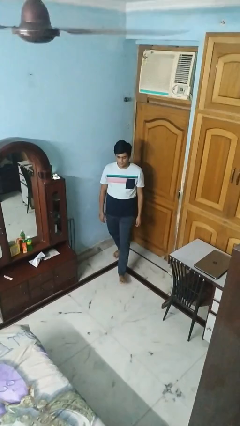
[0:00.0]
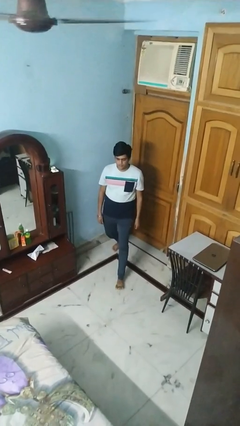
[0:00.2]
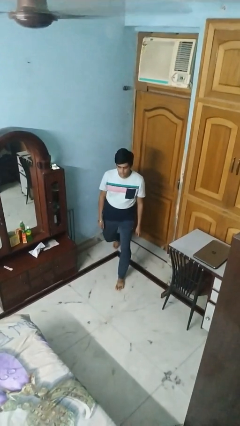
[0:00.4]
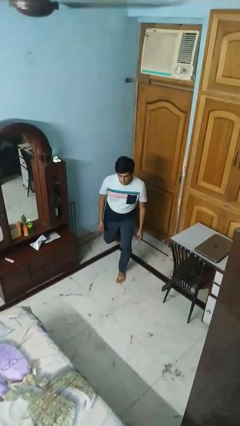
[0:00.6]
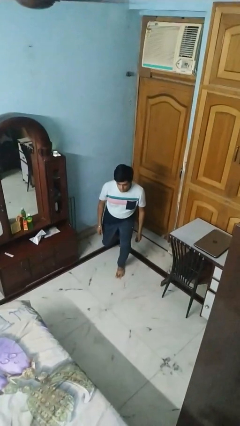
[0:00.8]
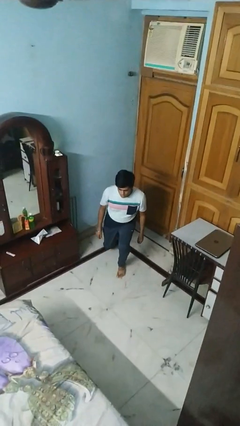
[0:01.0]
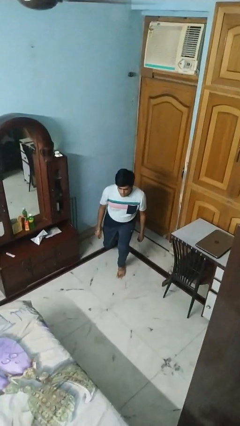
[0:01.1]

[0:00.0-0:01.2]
person exercises with lunges

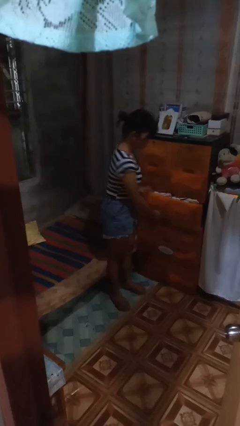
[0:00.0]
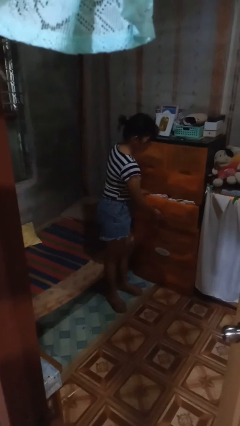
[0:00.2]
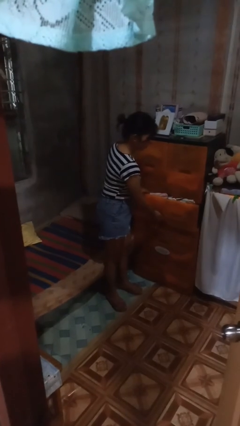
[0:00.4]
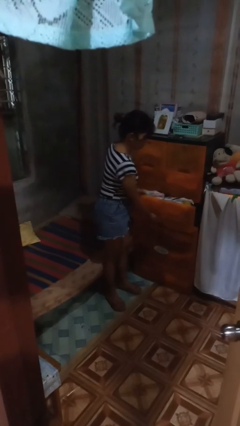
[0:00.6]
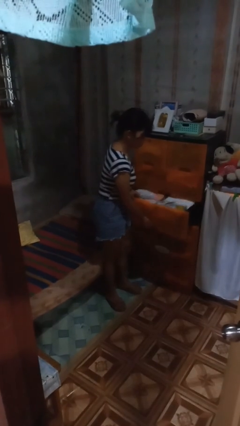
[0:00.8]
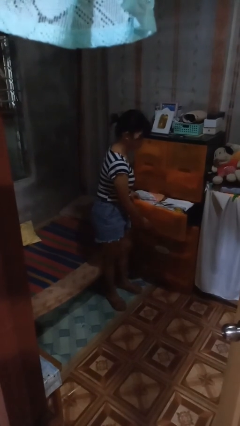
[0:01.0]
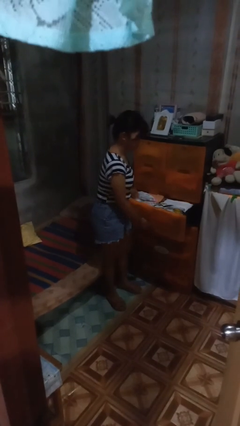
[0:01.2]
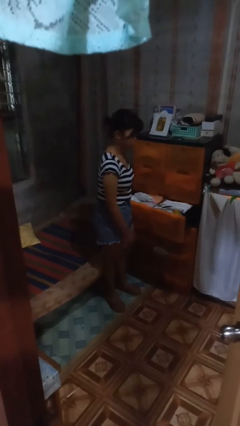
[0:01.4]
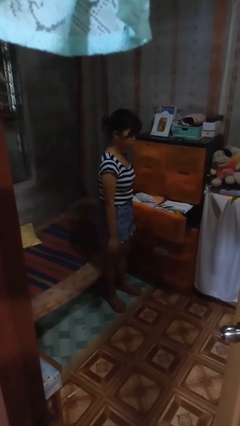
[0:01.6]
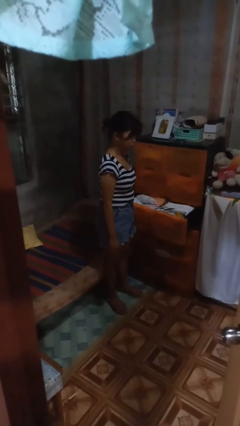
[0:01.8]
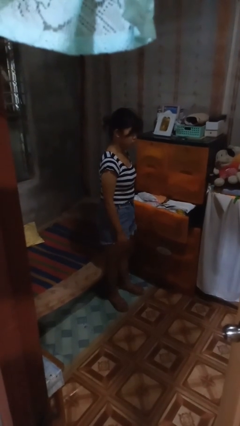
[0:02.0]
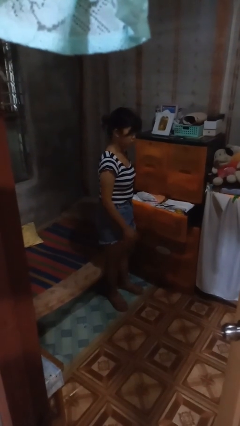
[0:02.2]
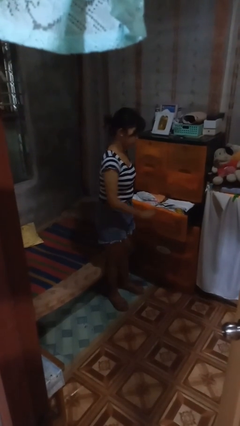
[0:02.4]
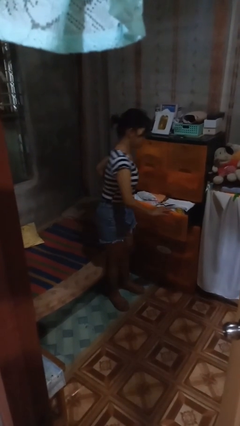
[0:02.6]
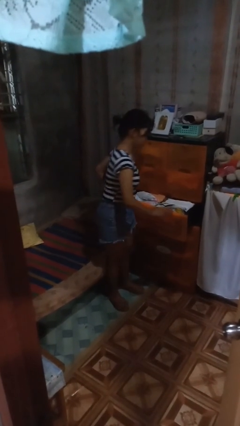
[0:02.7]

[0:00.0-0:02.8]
person opens dresser drawer

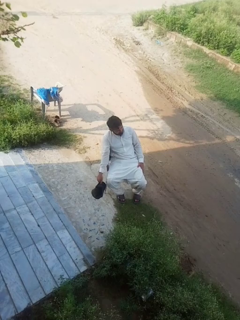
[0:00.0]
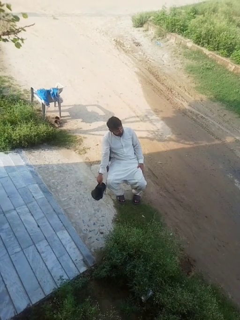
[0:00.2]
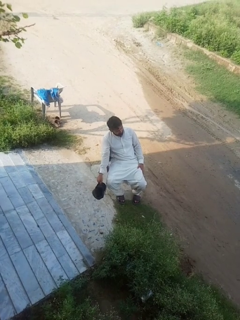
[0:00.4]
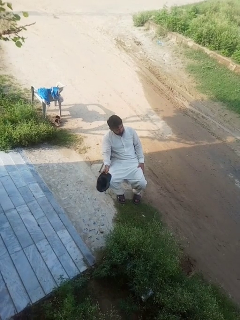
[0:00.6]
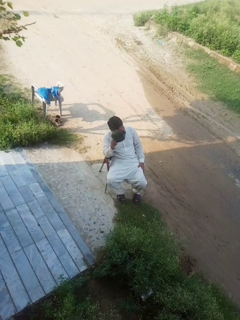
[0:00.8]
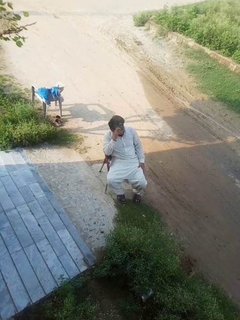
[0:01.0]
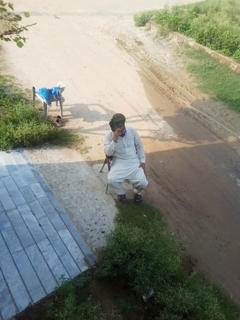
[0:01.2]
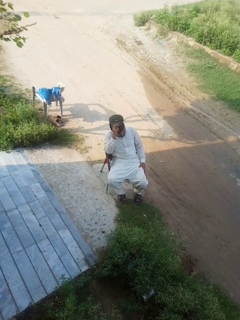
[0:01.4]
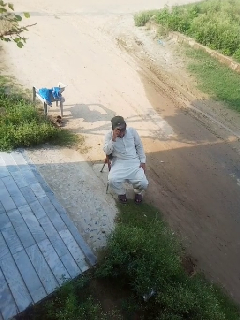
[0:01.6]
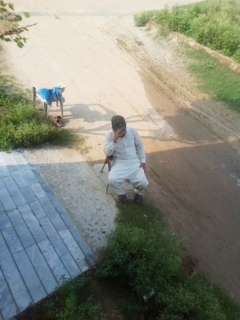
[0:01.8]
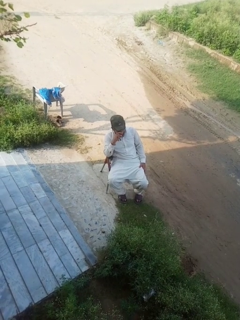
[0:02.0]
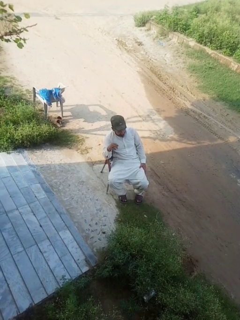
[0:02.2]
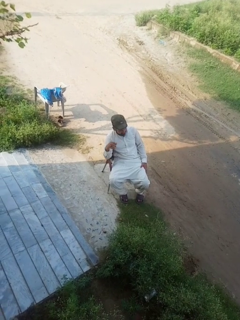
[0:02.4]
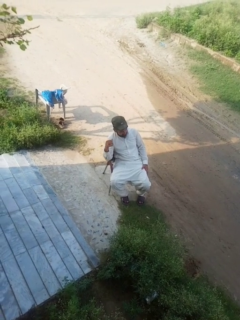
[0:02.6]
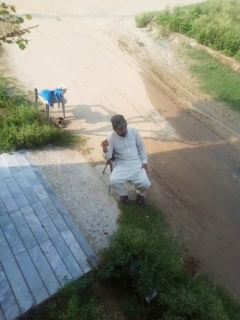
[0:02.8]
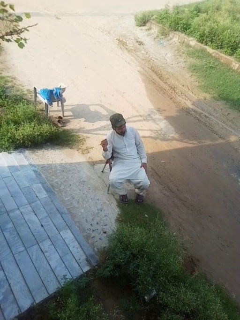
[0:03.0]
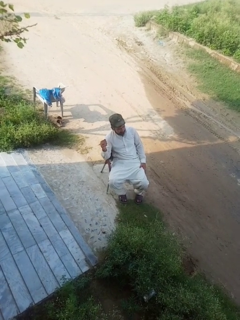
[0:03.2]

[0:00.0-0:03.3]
person puts on hat

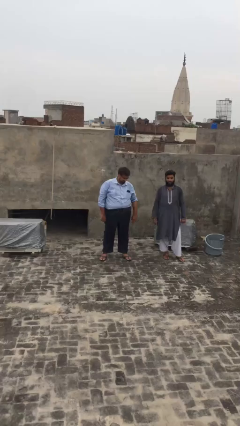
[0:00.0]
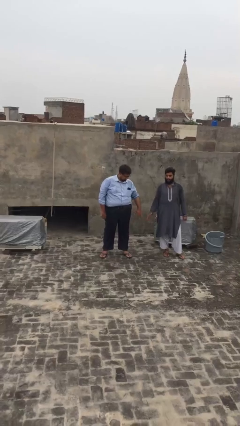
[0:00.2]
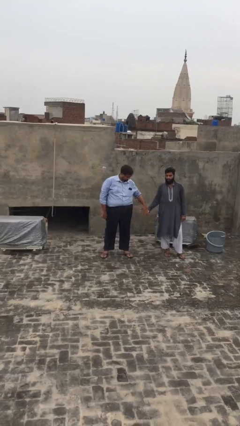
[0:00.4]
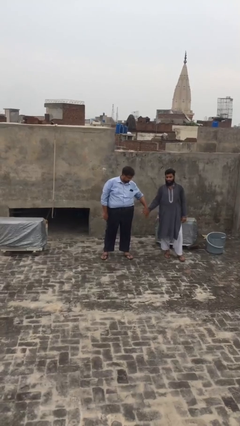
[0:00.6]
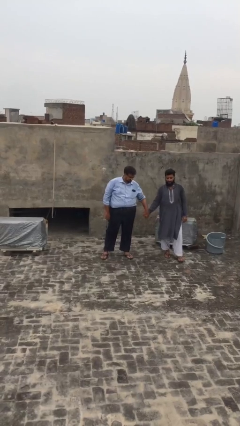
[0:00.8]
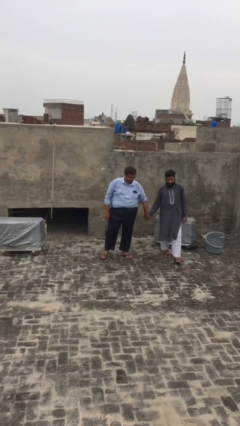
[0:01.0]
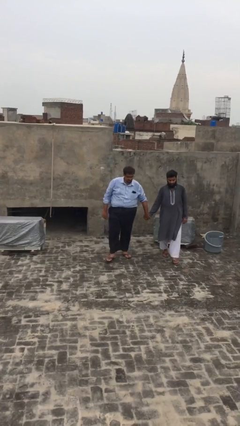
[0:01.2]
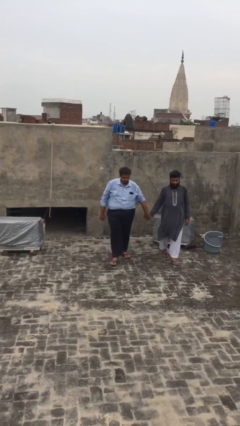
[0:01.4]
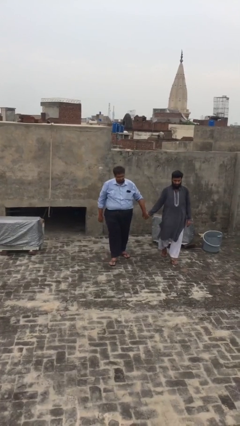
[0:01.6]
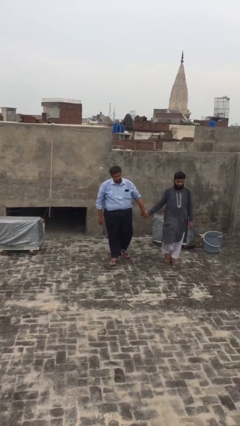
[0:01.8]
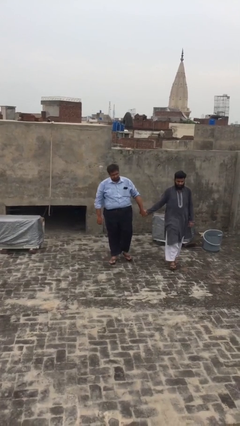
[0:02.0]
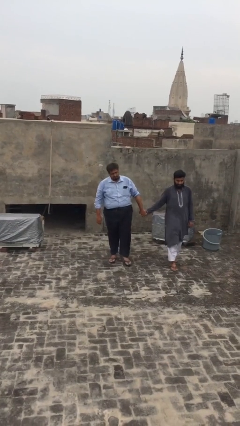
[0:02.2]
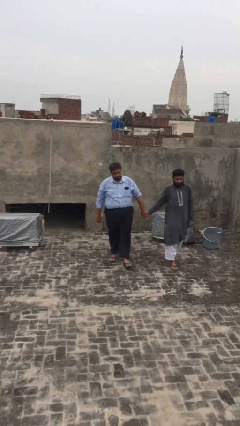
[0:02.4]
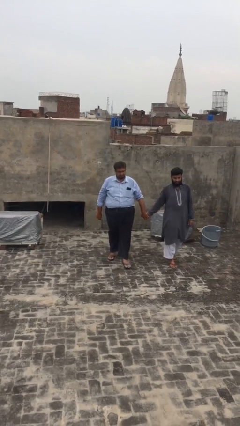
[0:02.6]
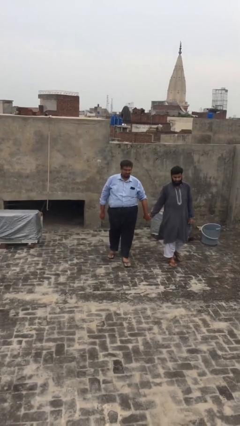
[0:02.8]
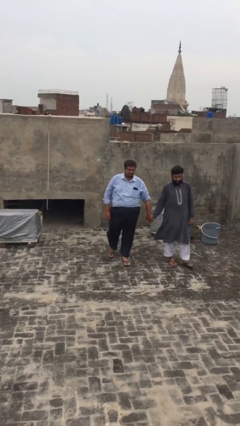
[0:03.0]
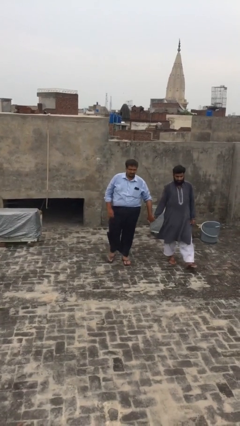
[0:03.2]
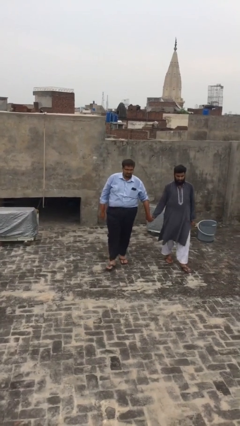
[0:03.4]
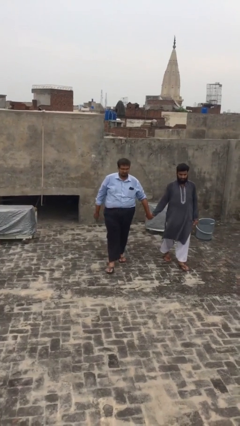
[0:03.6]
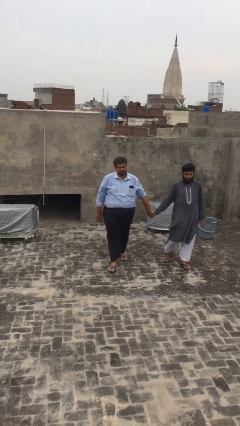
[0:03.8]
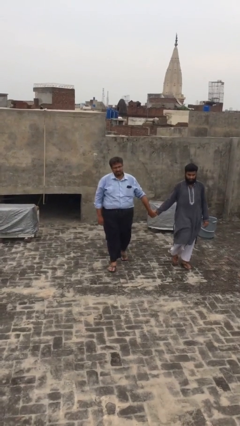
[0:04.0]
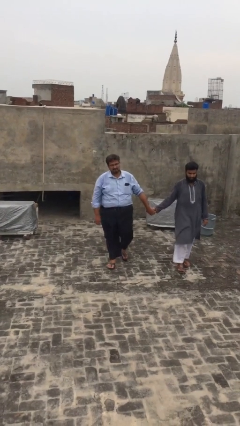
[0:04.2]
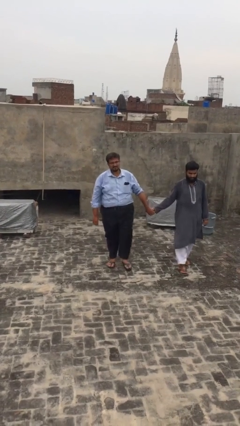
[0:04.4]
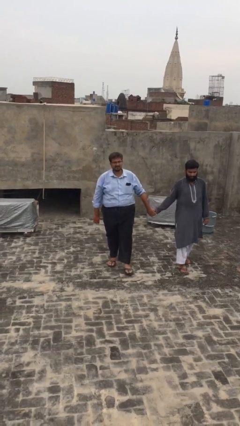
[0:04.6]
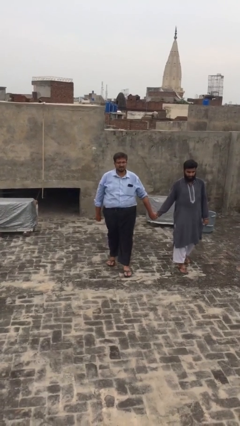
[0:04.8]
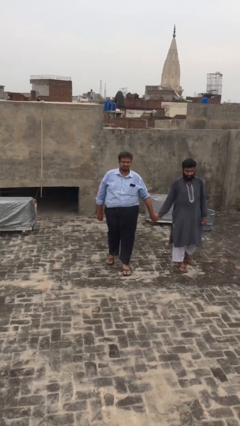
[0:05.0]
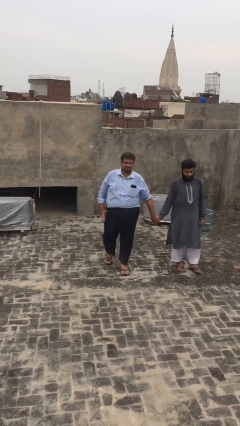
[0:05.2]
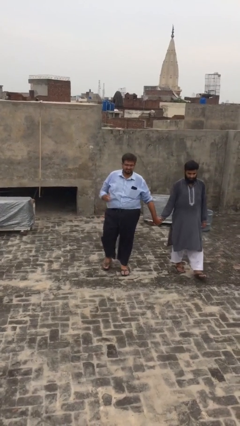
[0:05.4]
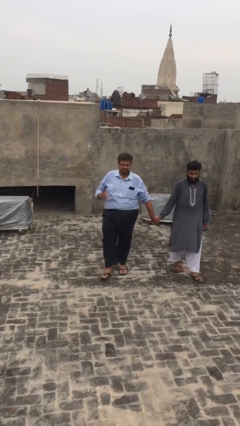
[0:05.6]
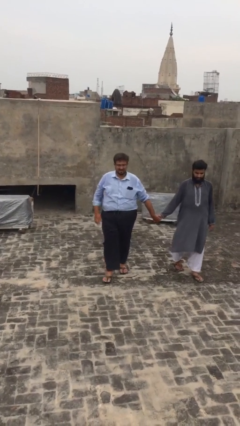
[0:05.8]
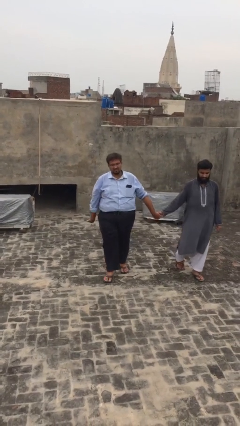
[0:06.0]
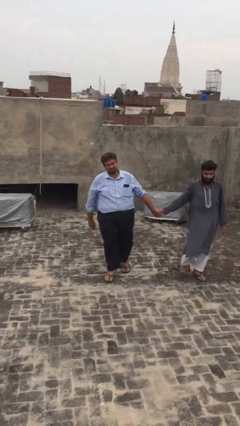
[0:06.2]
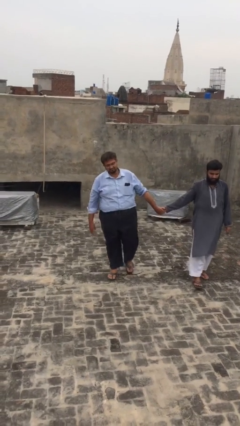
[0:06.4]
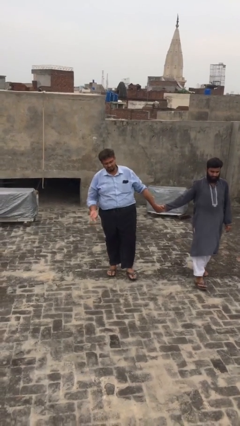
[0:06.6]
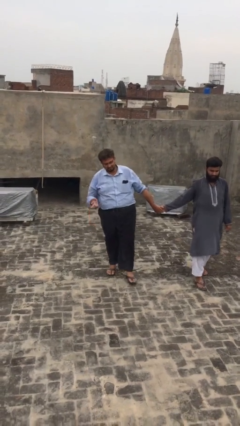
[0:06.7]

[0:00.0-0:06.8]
person holds hand

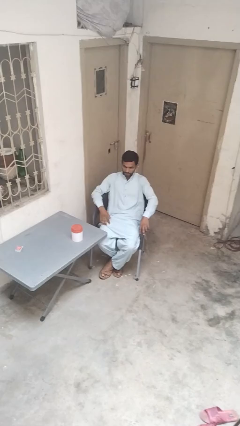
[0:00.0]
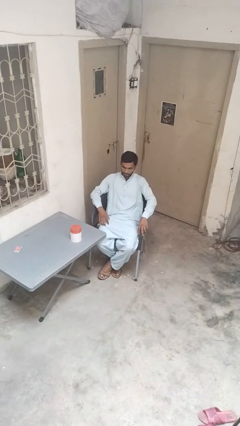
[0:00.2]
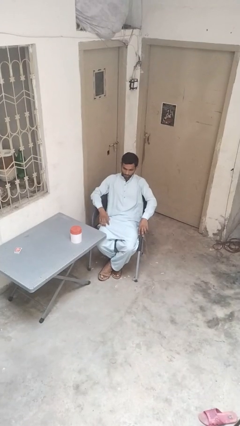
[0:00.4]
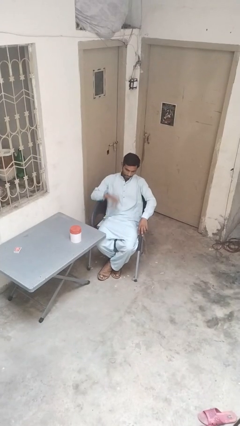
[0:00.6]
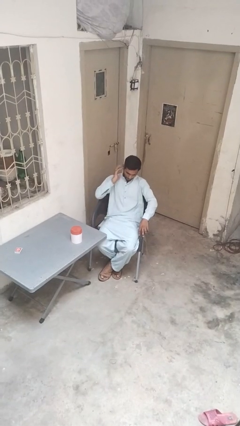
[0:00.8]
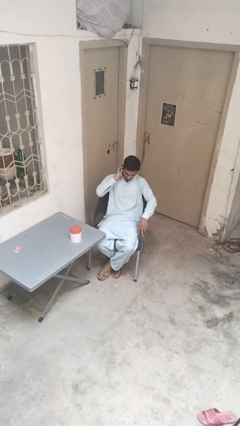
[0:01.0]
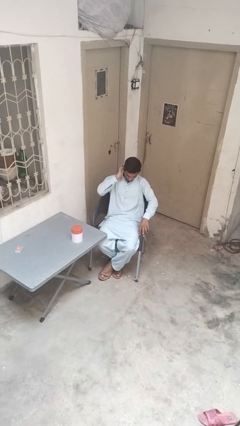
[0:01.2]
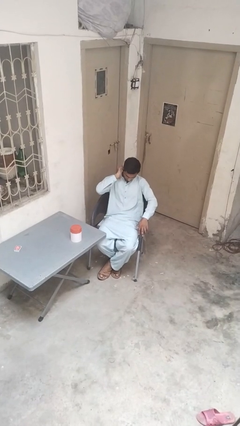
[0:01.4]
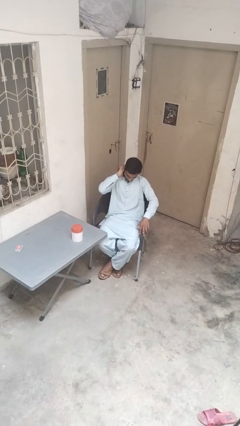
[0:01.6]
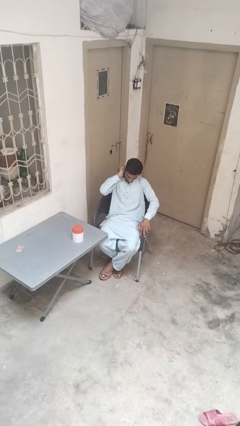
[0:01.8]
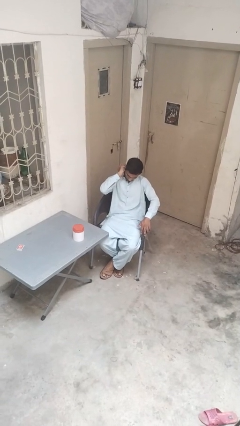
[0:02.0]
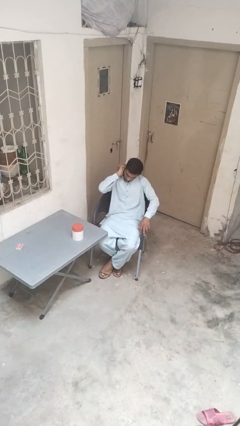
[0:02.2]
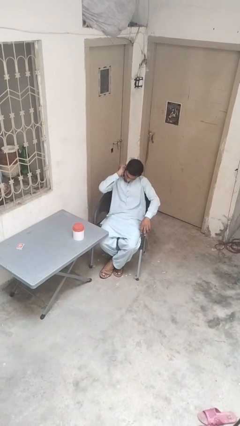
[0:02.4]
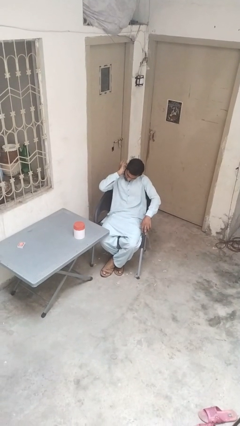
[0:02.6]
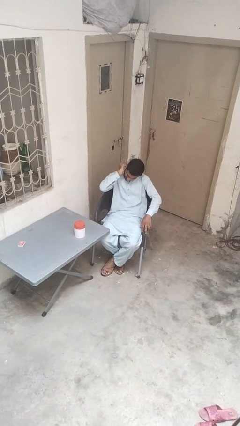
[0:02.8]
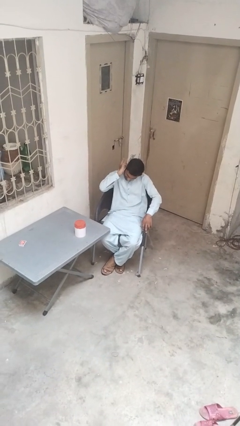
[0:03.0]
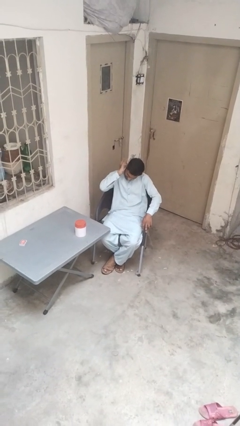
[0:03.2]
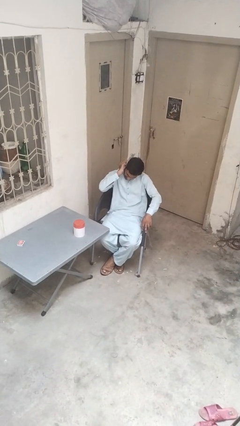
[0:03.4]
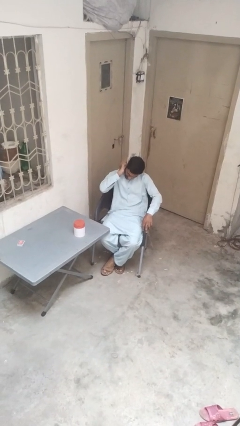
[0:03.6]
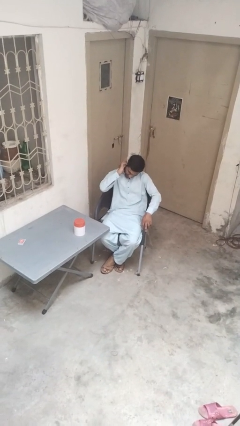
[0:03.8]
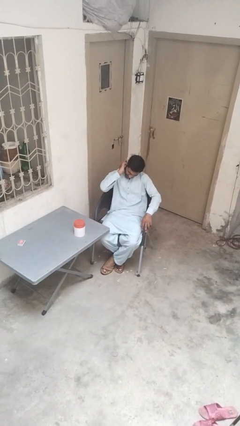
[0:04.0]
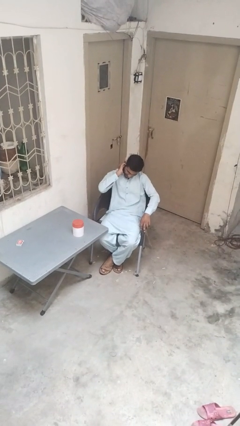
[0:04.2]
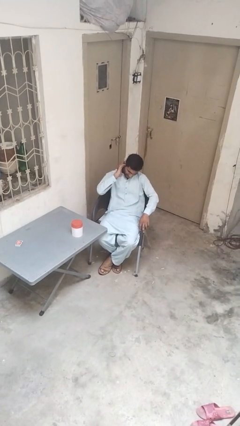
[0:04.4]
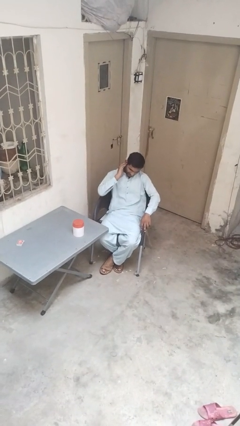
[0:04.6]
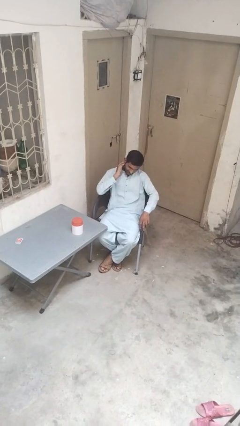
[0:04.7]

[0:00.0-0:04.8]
person puts fingers in ear
